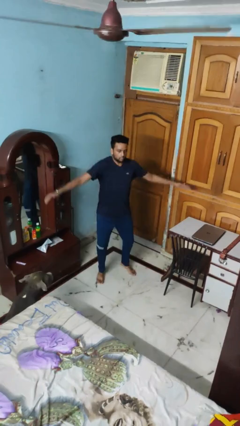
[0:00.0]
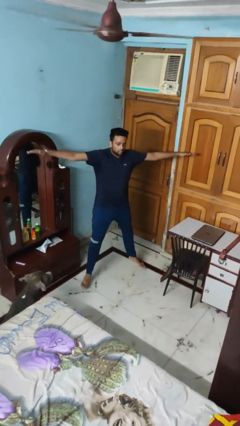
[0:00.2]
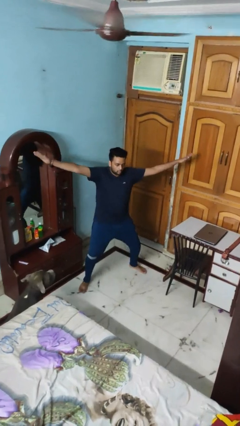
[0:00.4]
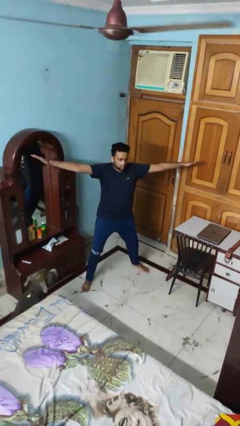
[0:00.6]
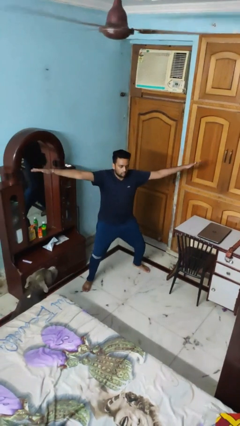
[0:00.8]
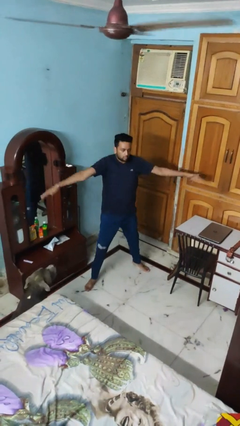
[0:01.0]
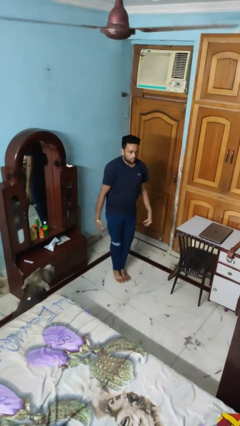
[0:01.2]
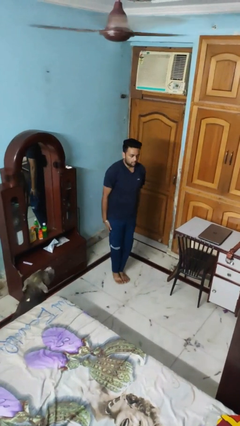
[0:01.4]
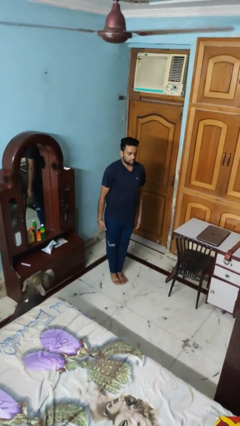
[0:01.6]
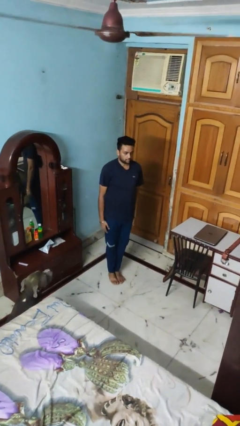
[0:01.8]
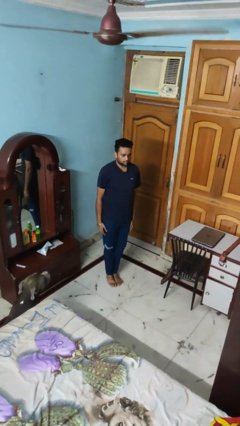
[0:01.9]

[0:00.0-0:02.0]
person exercises with jumping jacks

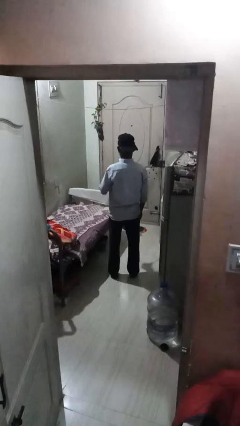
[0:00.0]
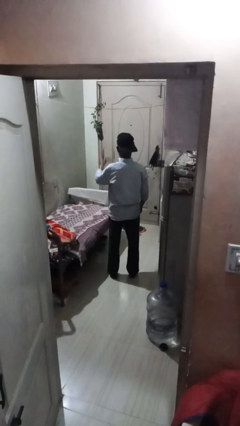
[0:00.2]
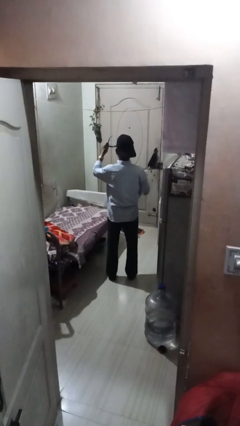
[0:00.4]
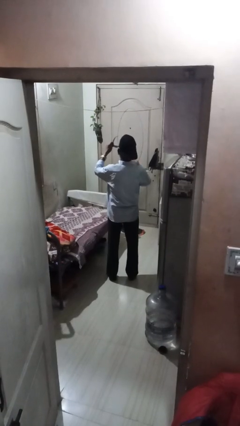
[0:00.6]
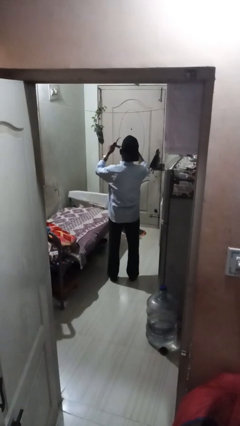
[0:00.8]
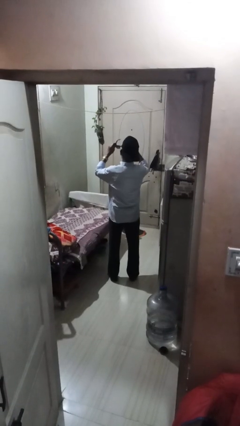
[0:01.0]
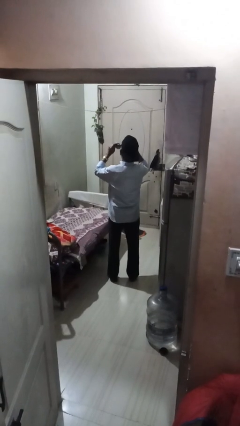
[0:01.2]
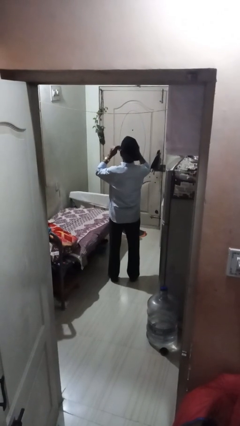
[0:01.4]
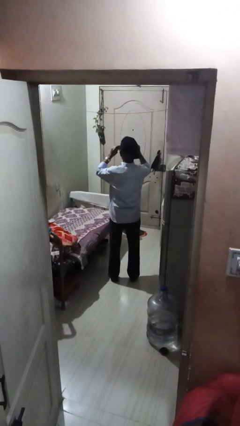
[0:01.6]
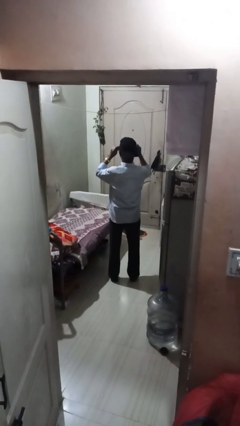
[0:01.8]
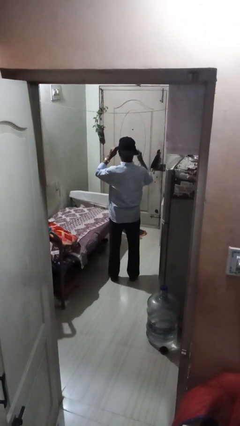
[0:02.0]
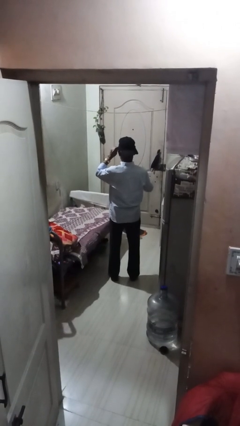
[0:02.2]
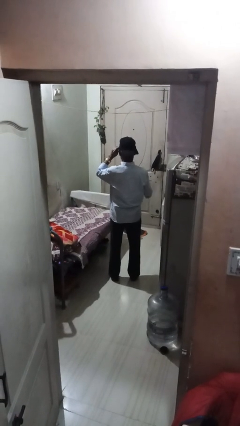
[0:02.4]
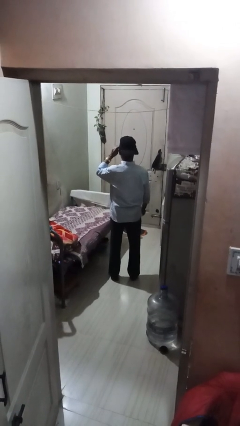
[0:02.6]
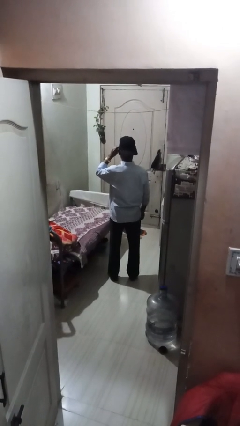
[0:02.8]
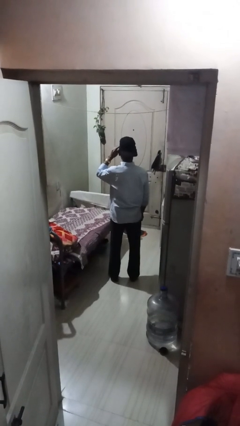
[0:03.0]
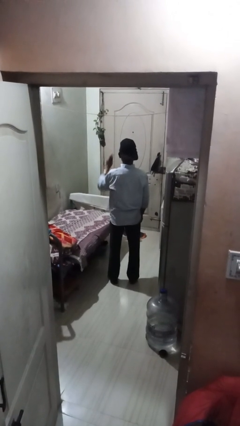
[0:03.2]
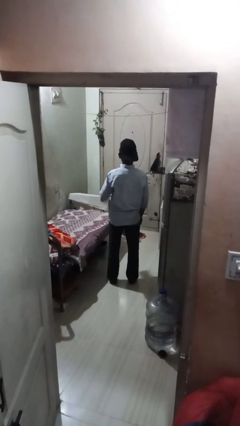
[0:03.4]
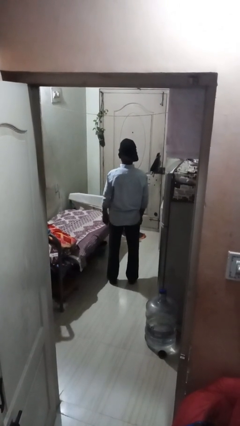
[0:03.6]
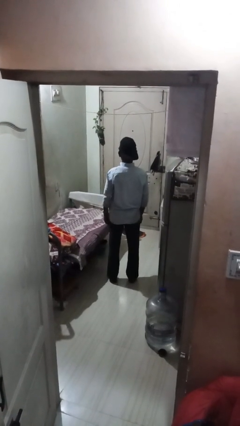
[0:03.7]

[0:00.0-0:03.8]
person puts on sunglasses

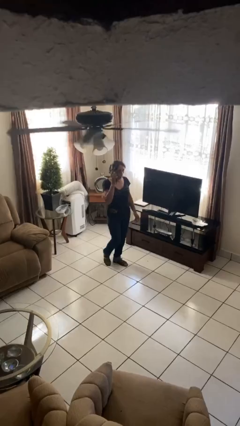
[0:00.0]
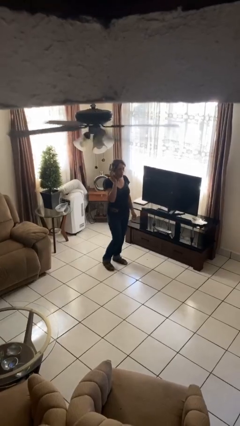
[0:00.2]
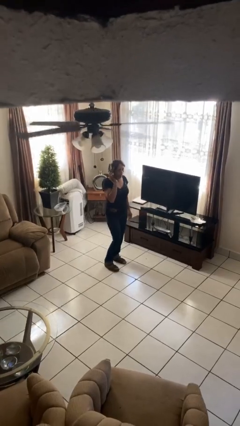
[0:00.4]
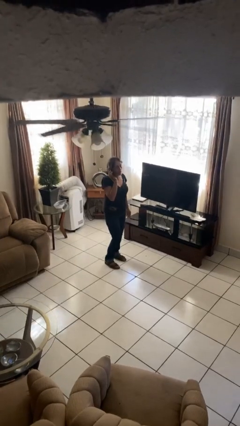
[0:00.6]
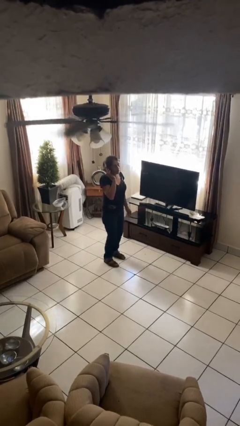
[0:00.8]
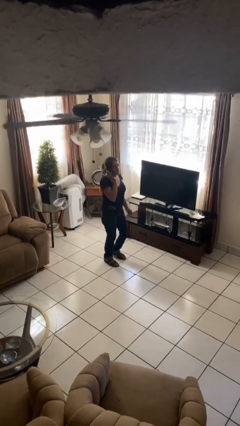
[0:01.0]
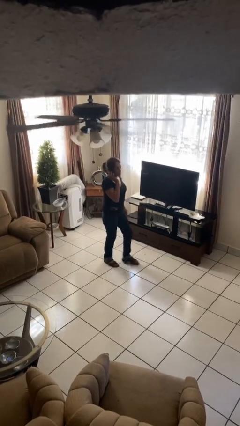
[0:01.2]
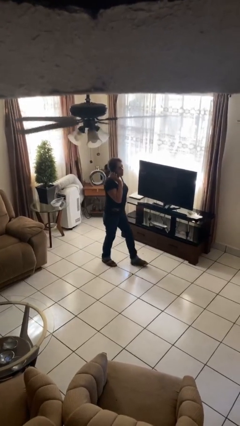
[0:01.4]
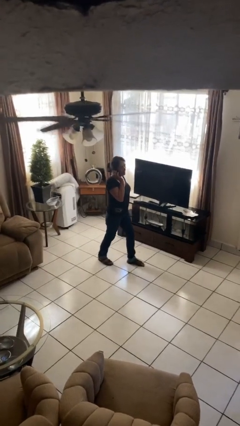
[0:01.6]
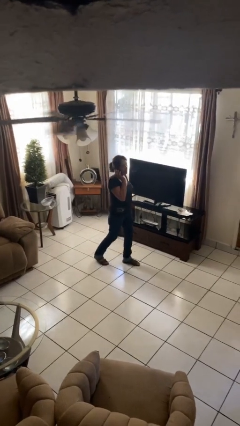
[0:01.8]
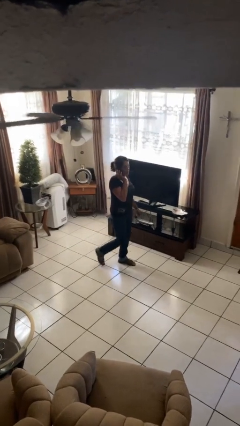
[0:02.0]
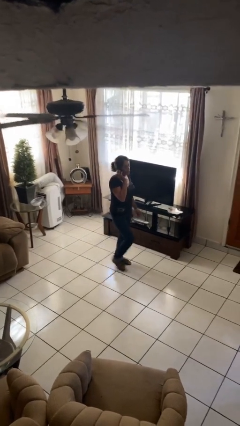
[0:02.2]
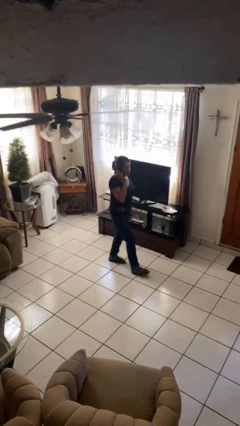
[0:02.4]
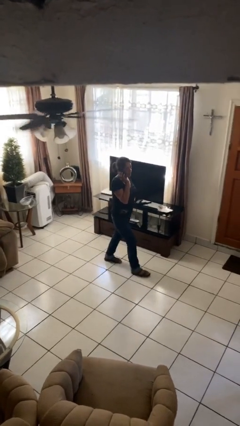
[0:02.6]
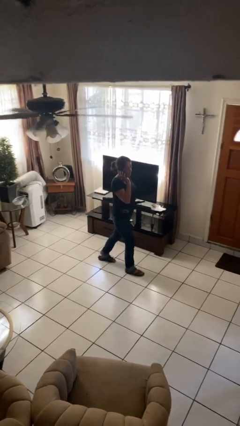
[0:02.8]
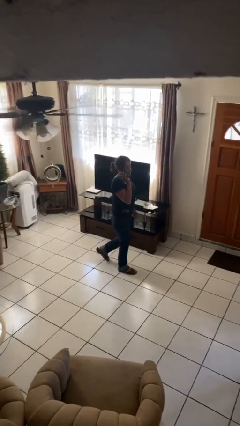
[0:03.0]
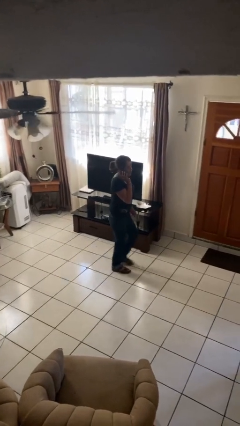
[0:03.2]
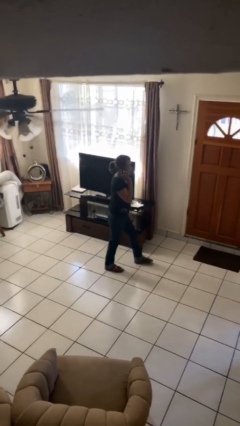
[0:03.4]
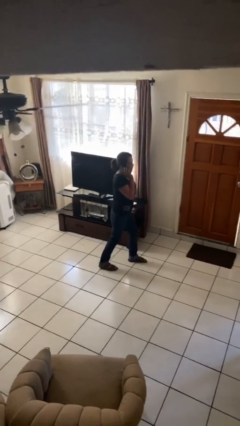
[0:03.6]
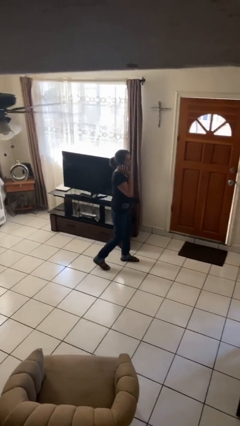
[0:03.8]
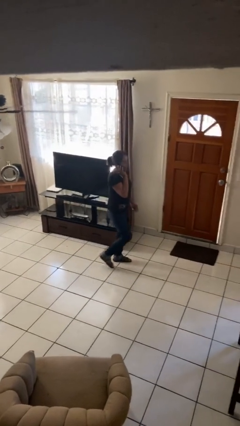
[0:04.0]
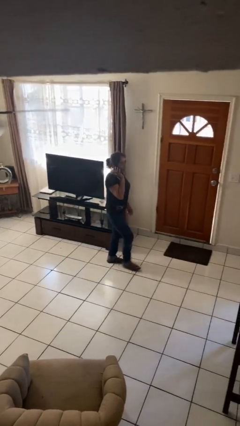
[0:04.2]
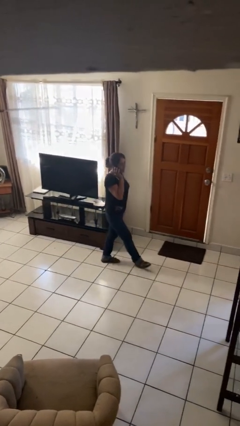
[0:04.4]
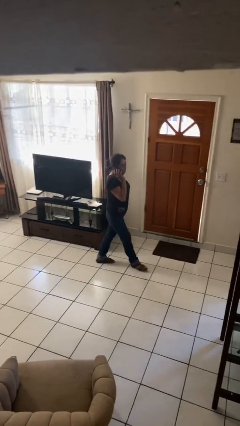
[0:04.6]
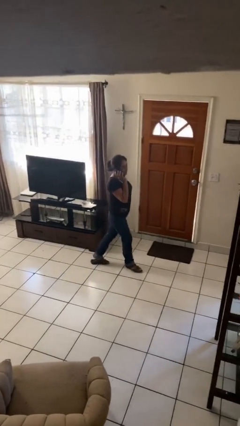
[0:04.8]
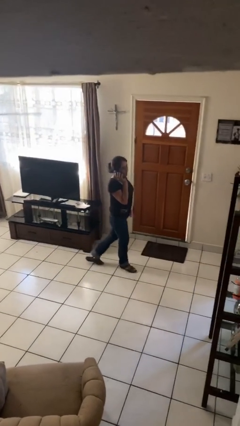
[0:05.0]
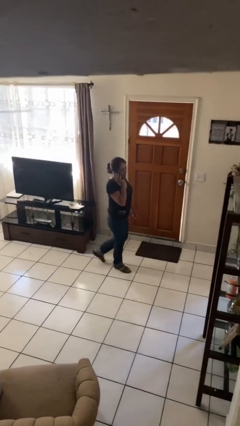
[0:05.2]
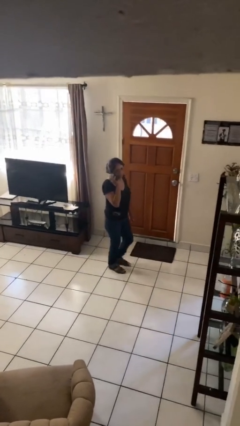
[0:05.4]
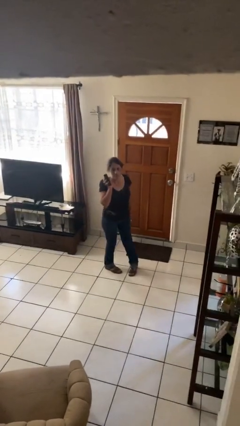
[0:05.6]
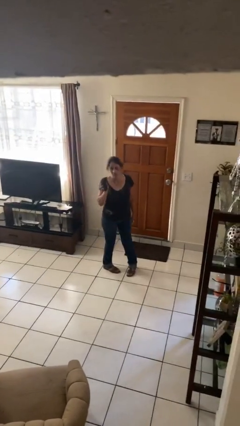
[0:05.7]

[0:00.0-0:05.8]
person talks on phone

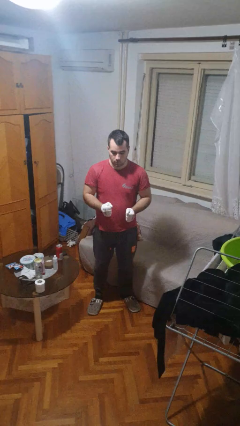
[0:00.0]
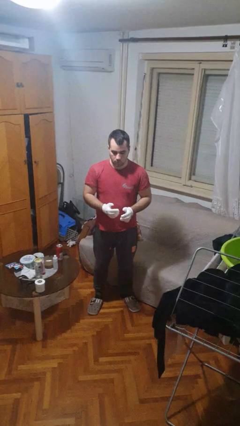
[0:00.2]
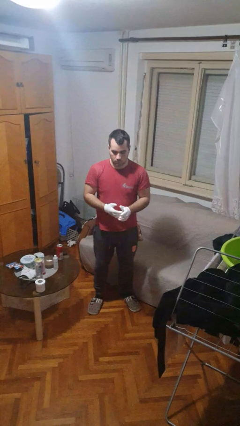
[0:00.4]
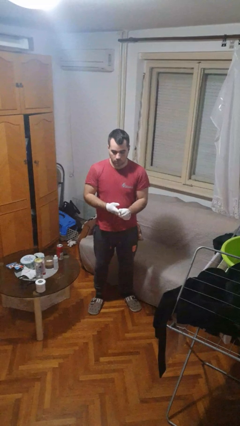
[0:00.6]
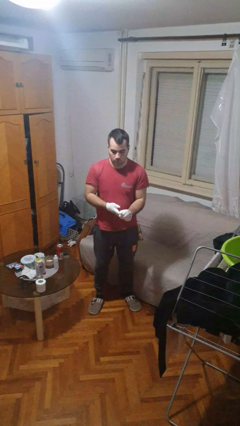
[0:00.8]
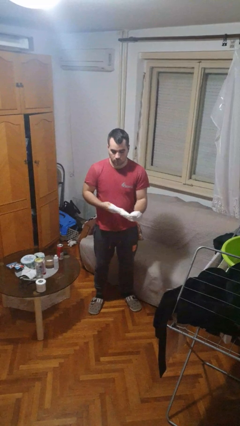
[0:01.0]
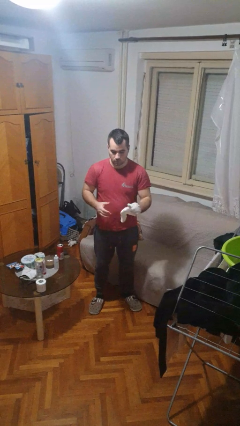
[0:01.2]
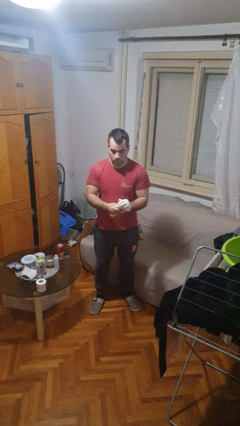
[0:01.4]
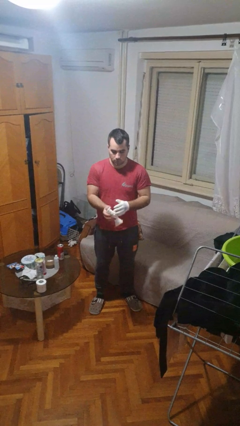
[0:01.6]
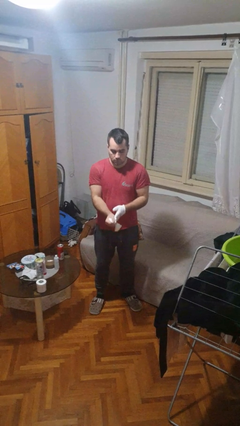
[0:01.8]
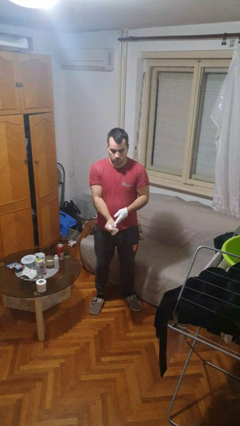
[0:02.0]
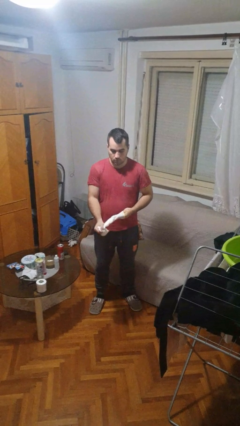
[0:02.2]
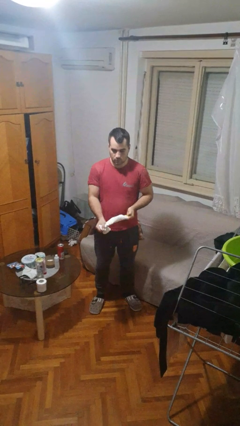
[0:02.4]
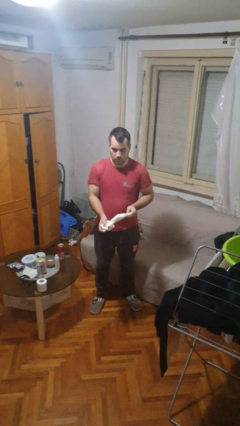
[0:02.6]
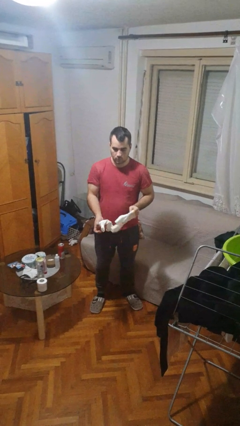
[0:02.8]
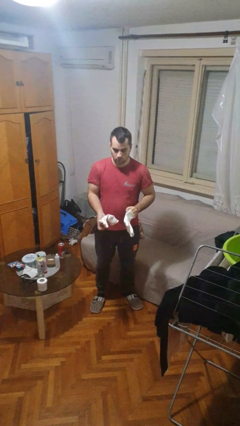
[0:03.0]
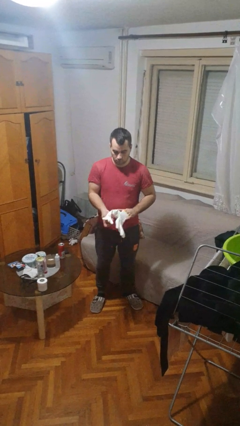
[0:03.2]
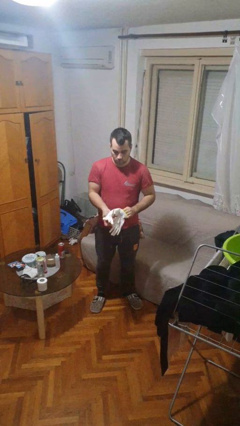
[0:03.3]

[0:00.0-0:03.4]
person takes off gloves

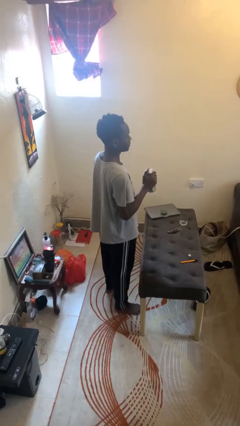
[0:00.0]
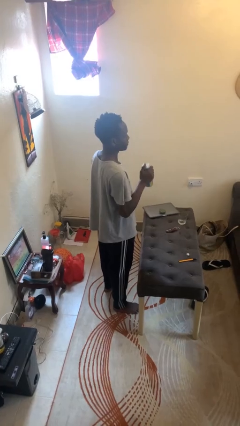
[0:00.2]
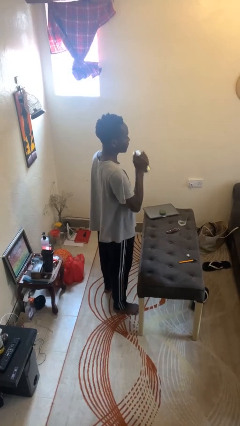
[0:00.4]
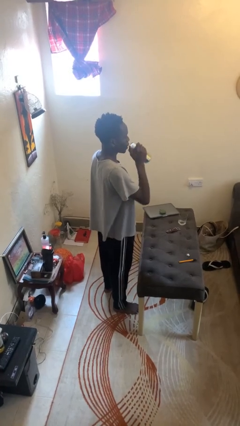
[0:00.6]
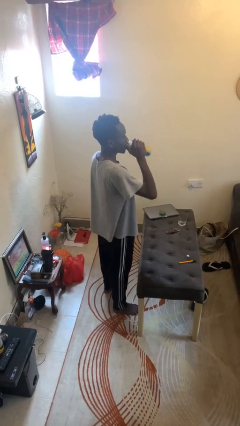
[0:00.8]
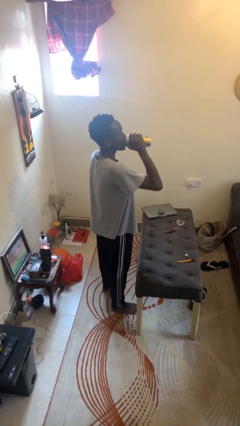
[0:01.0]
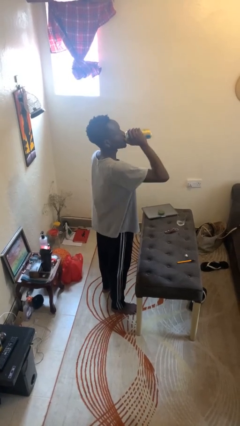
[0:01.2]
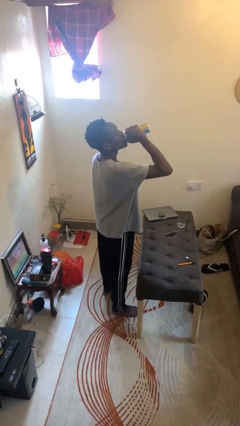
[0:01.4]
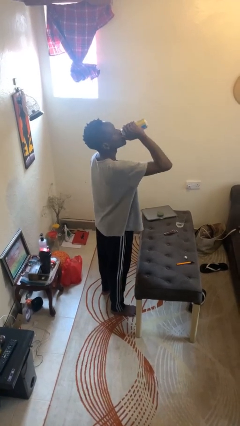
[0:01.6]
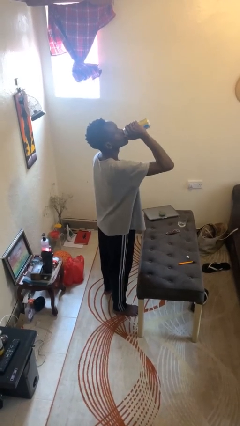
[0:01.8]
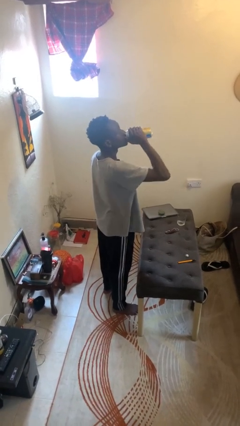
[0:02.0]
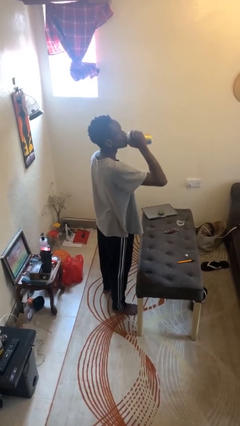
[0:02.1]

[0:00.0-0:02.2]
person drinks from beverage can

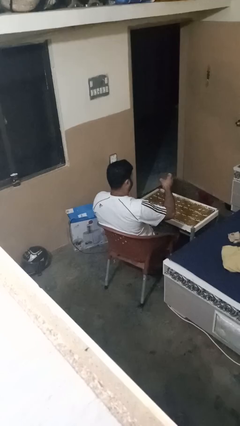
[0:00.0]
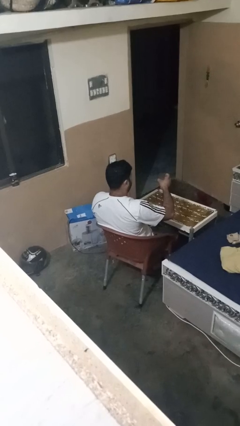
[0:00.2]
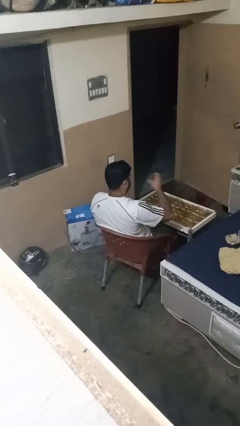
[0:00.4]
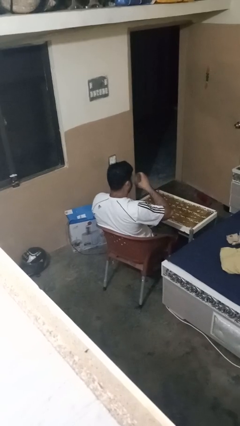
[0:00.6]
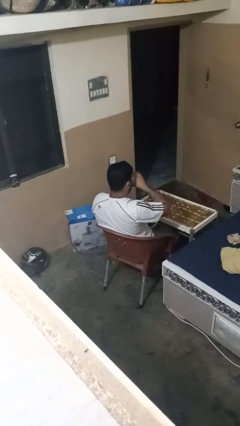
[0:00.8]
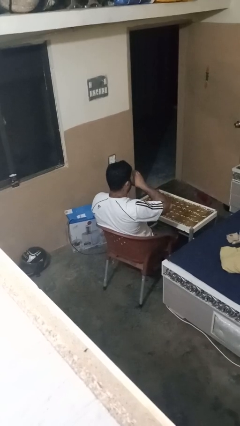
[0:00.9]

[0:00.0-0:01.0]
person drinks from shotglass
